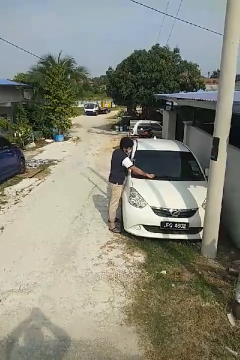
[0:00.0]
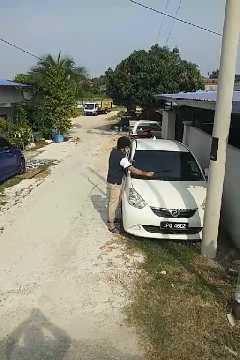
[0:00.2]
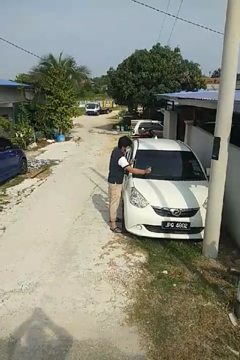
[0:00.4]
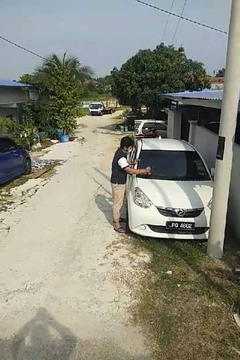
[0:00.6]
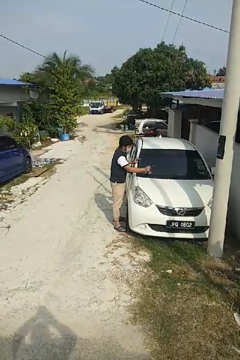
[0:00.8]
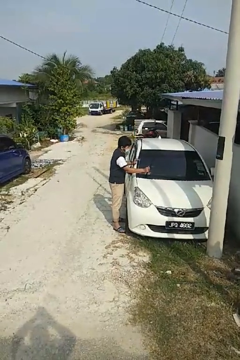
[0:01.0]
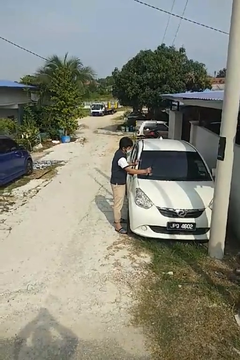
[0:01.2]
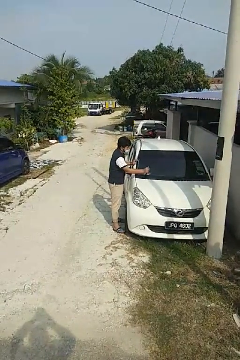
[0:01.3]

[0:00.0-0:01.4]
person flips up car wipers

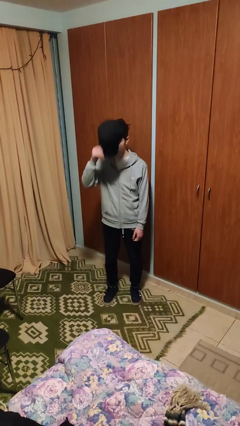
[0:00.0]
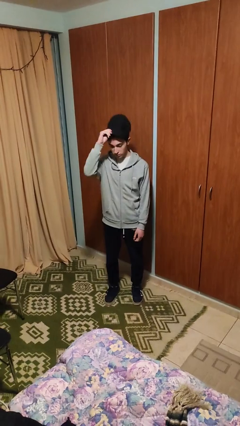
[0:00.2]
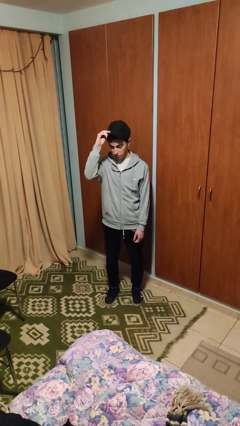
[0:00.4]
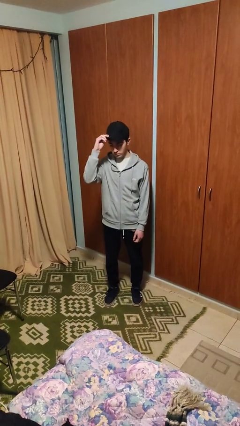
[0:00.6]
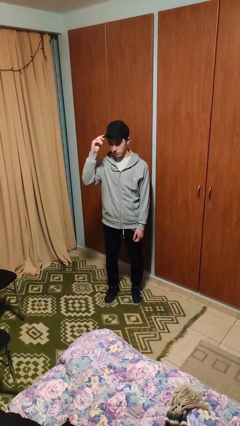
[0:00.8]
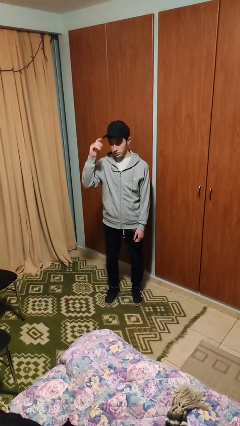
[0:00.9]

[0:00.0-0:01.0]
person puts on hat

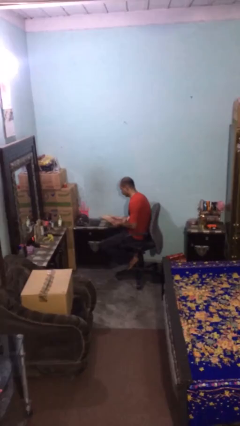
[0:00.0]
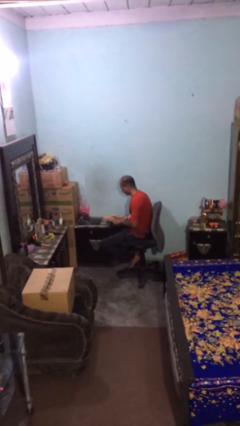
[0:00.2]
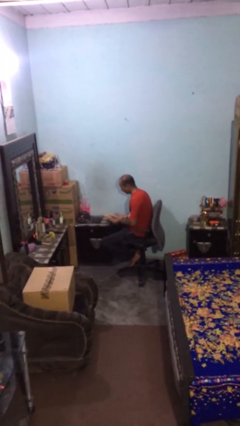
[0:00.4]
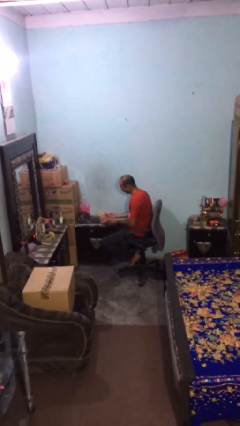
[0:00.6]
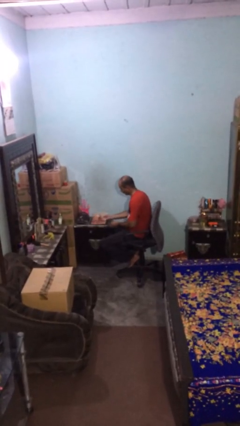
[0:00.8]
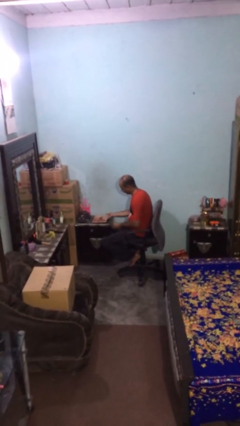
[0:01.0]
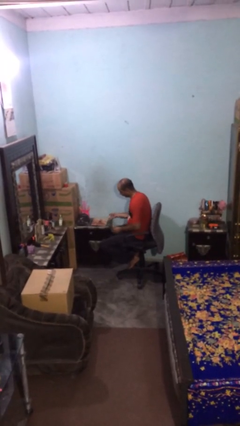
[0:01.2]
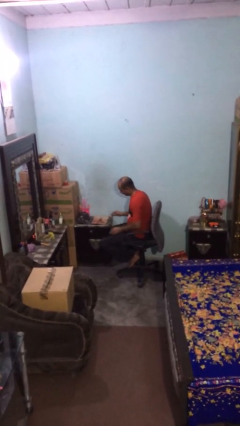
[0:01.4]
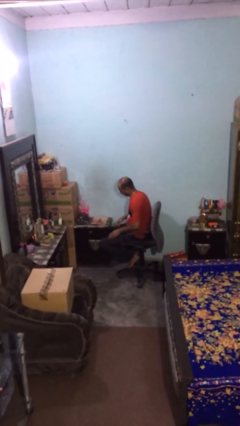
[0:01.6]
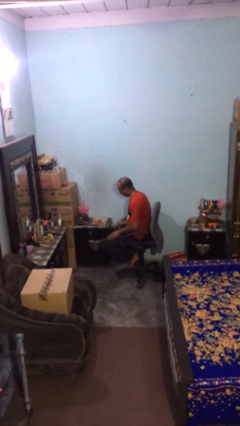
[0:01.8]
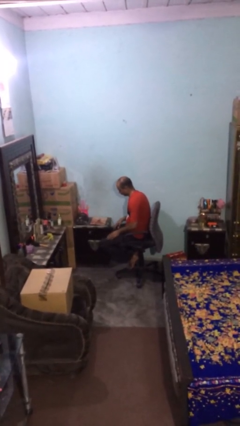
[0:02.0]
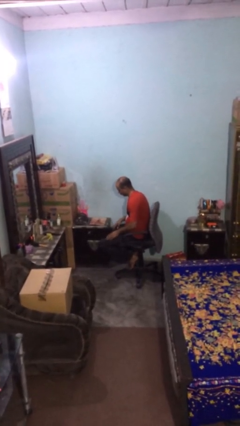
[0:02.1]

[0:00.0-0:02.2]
person puts down object on table

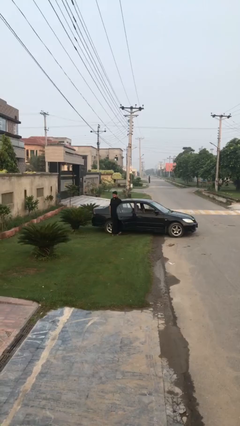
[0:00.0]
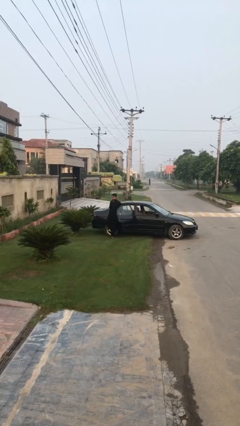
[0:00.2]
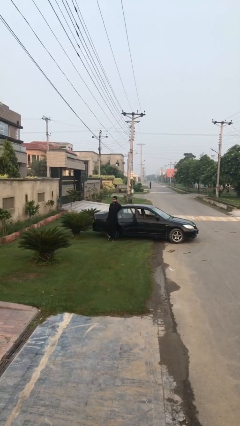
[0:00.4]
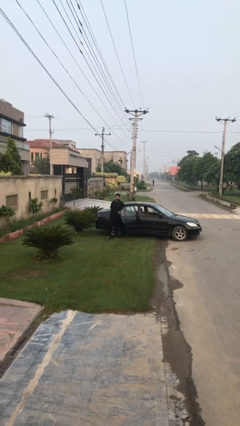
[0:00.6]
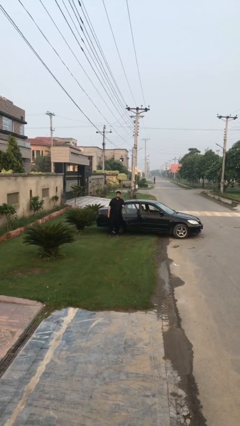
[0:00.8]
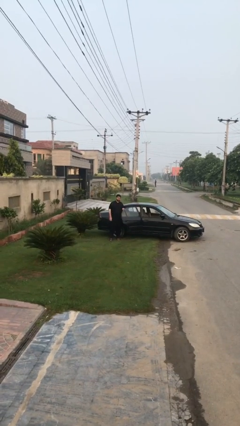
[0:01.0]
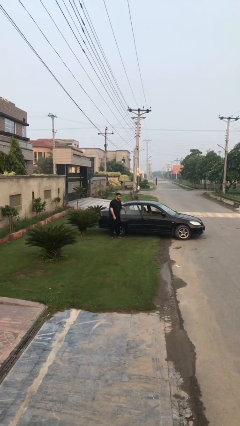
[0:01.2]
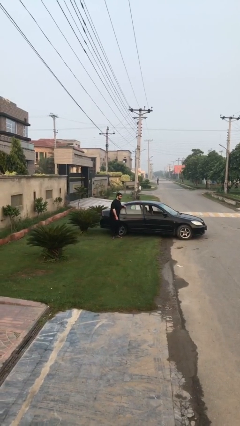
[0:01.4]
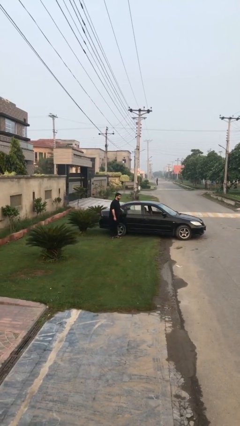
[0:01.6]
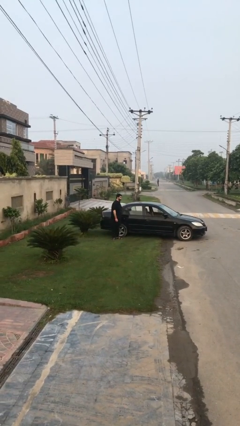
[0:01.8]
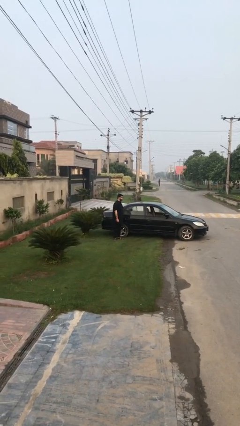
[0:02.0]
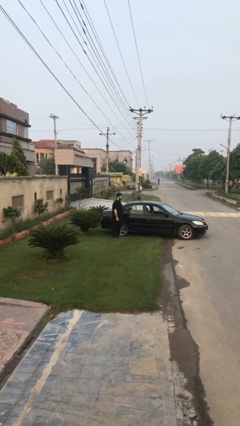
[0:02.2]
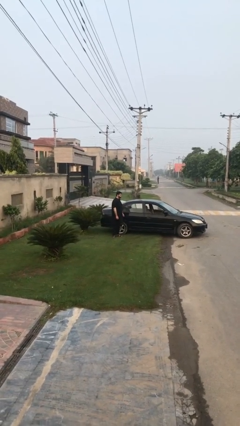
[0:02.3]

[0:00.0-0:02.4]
person closes car door

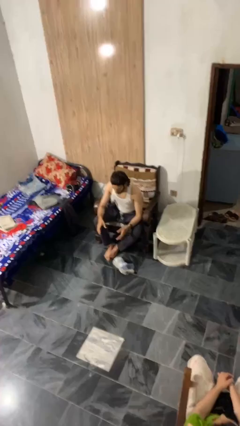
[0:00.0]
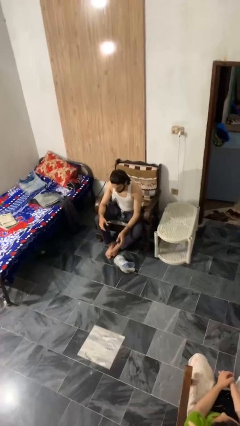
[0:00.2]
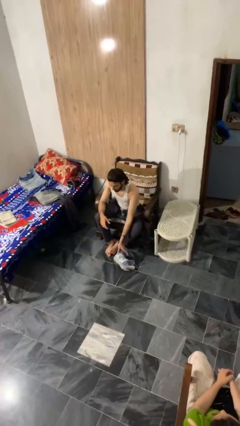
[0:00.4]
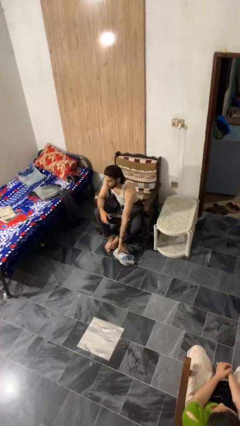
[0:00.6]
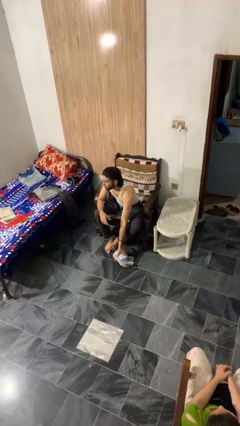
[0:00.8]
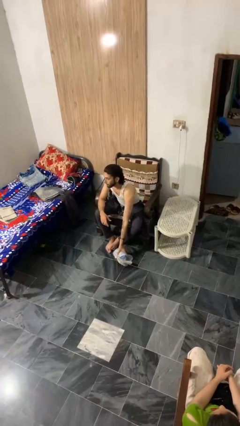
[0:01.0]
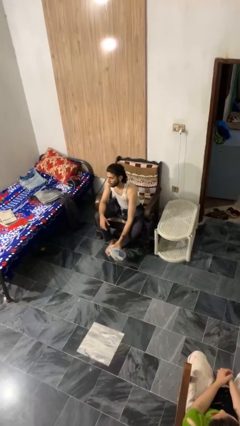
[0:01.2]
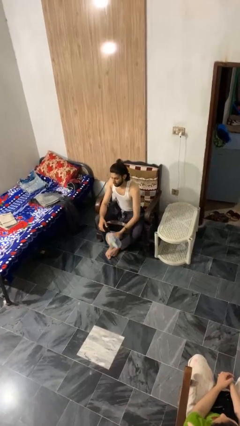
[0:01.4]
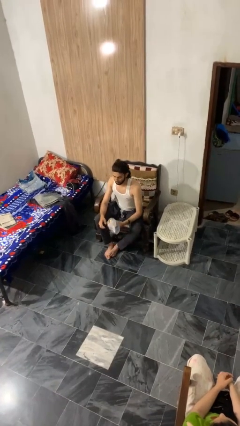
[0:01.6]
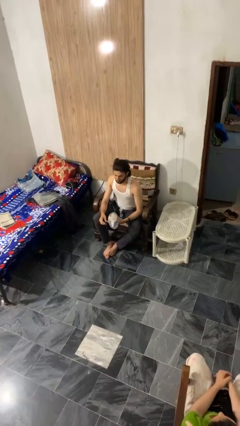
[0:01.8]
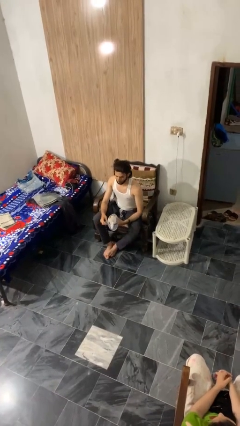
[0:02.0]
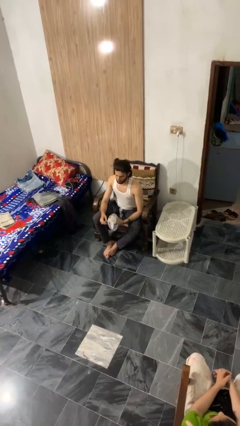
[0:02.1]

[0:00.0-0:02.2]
person picks up object from floor

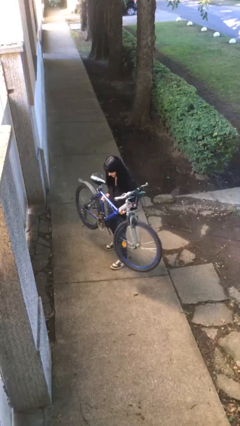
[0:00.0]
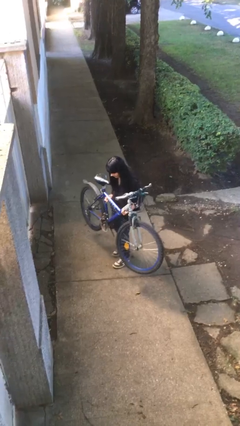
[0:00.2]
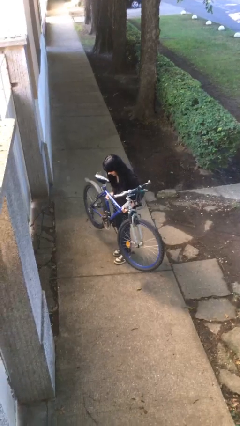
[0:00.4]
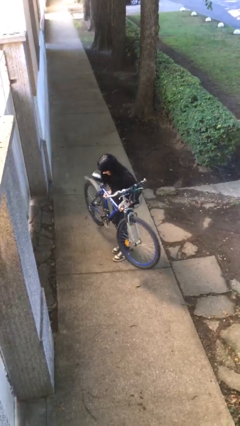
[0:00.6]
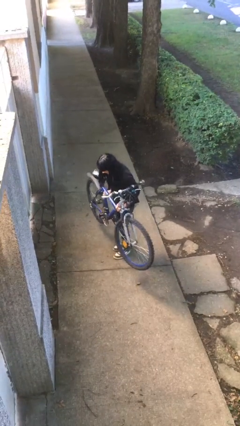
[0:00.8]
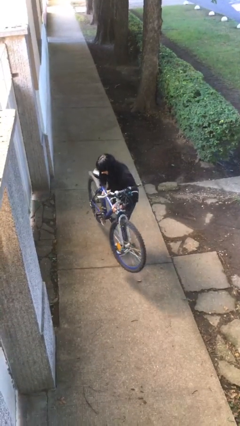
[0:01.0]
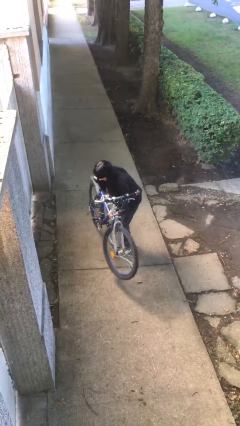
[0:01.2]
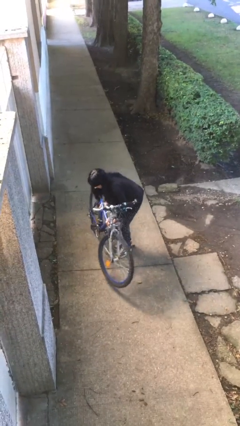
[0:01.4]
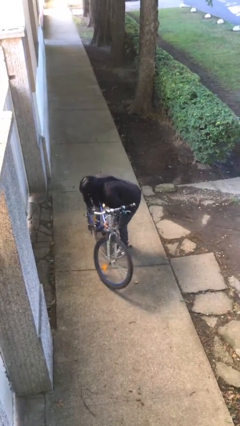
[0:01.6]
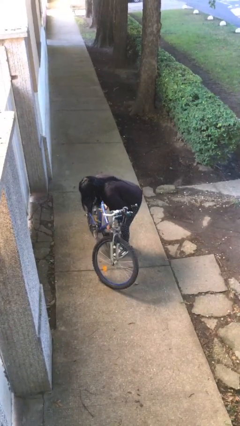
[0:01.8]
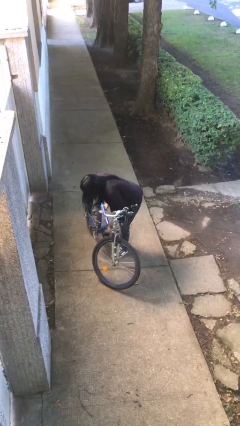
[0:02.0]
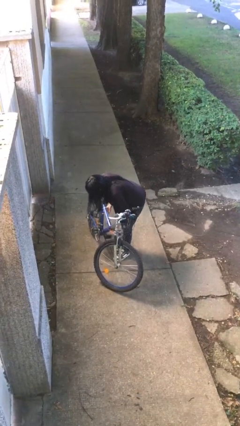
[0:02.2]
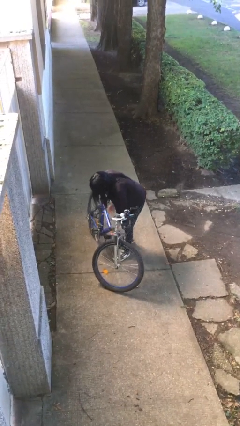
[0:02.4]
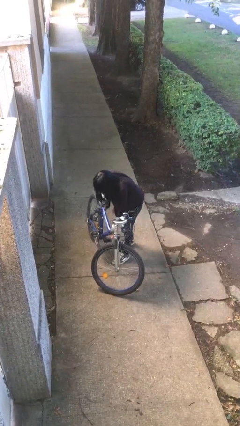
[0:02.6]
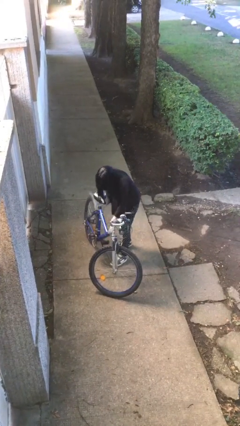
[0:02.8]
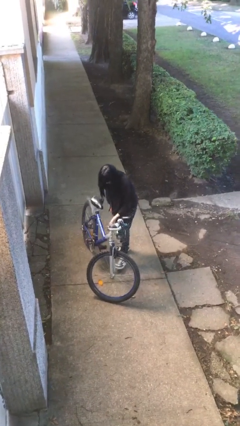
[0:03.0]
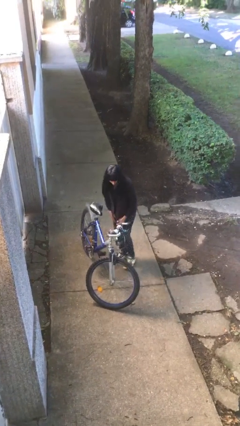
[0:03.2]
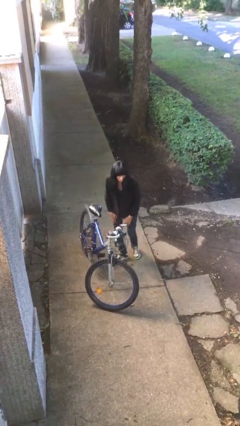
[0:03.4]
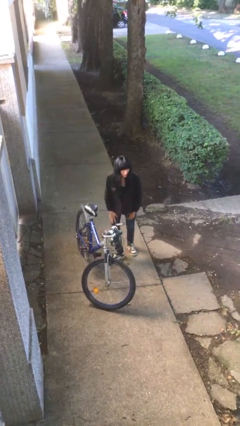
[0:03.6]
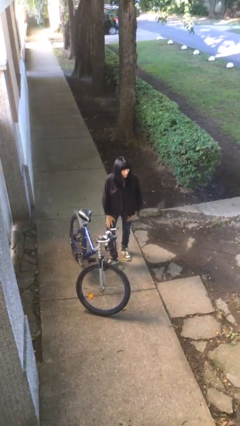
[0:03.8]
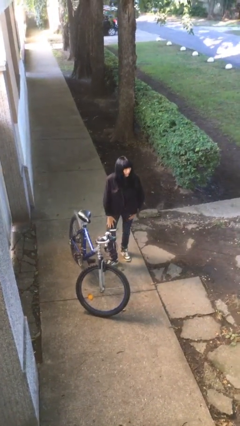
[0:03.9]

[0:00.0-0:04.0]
person puts down object on floor

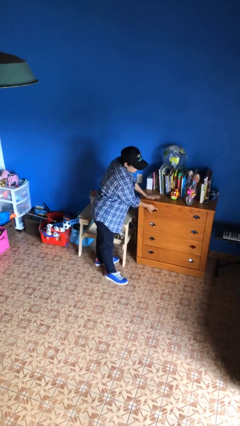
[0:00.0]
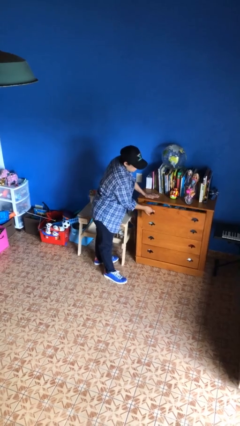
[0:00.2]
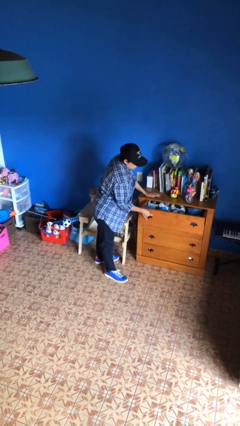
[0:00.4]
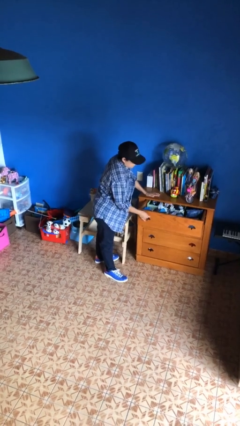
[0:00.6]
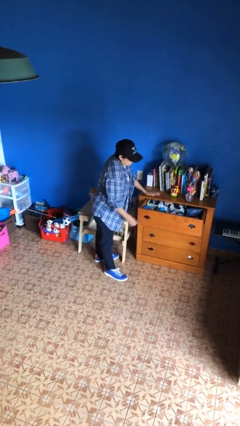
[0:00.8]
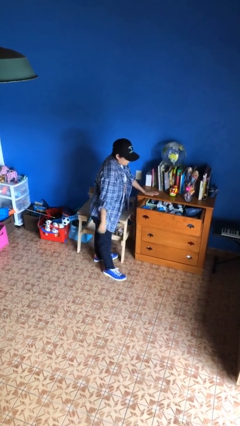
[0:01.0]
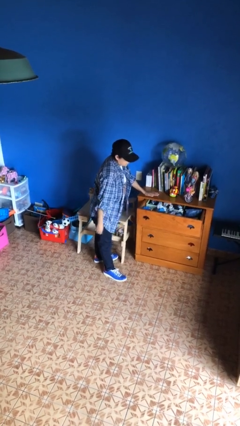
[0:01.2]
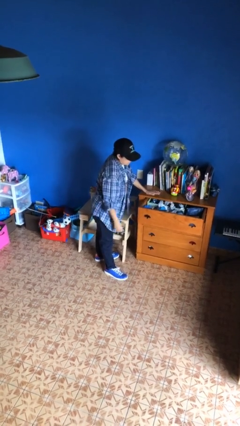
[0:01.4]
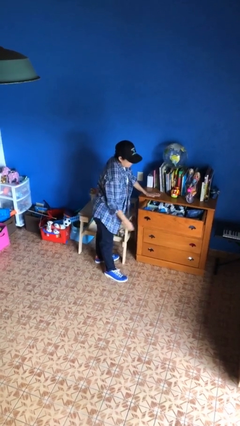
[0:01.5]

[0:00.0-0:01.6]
person opens dresser drawer

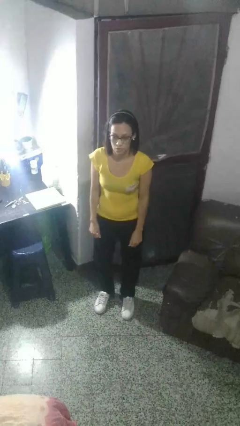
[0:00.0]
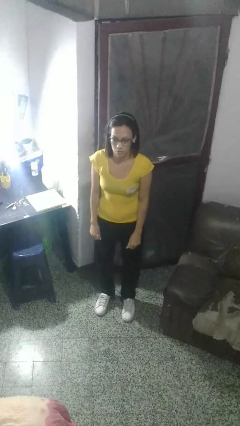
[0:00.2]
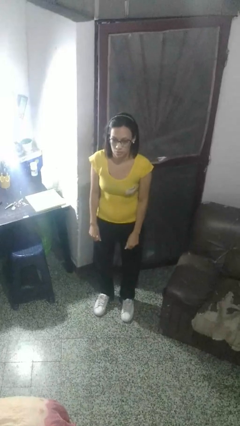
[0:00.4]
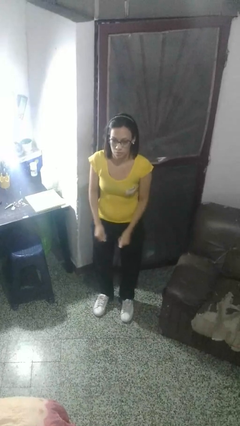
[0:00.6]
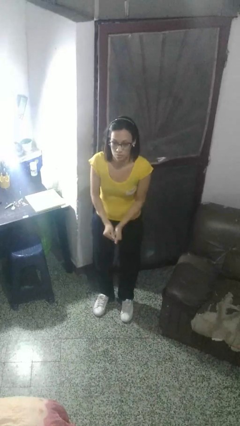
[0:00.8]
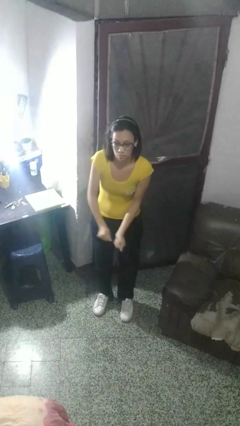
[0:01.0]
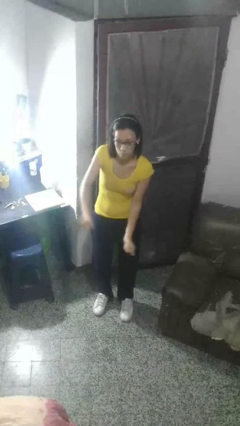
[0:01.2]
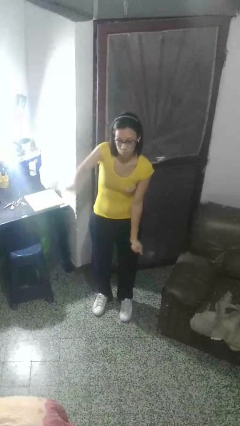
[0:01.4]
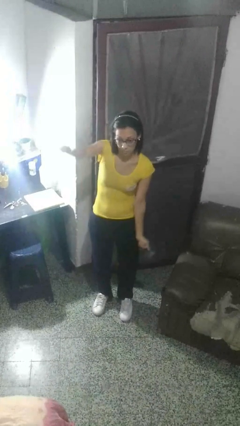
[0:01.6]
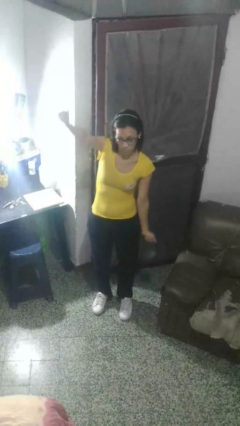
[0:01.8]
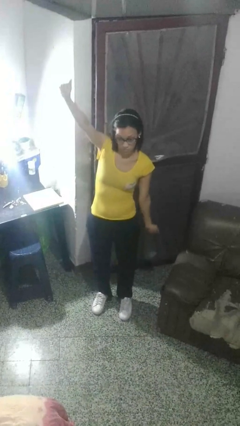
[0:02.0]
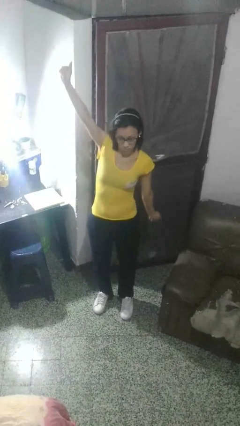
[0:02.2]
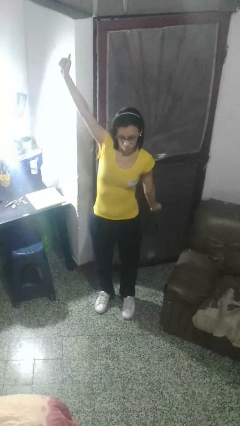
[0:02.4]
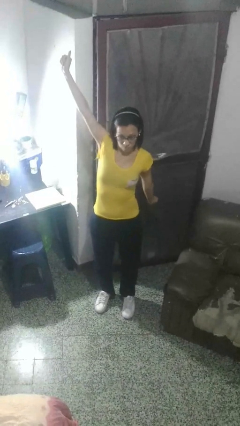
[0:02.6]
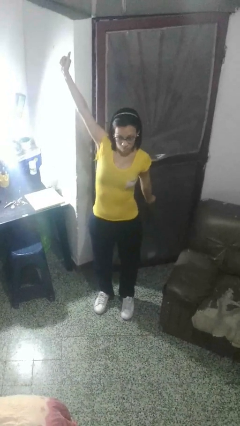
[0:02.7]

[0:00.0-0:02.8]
person gestures zoom in
